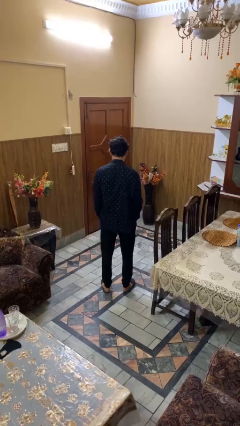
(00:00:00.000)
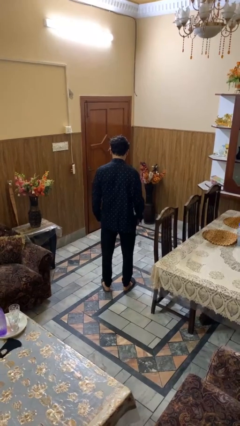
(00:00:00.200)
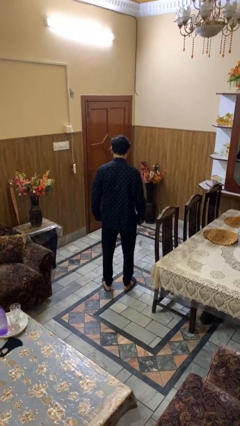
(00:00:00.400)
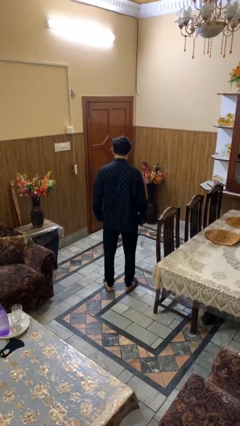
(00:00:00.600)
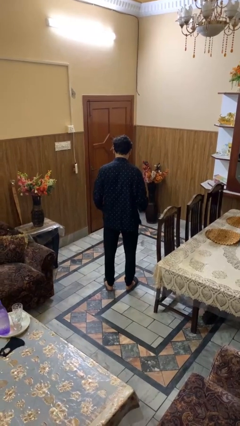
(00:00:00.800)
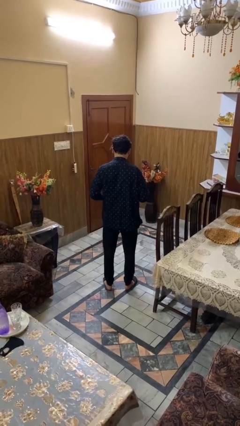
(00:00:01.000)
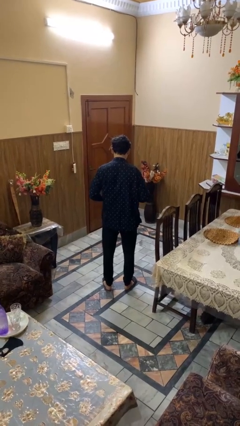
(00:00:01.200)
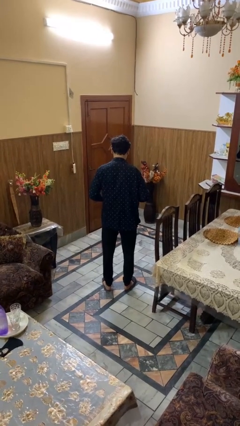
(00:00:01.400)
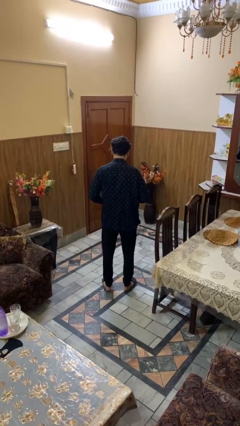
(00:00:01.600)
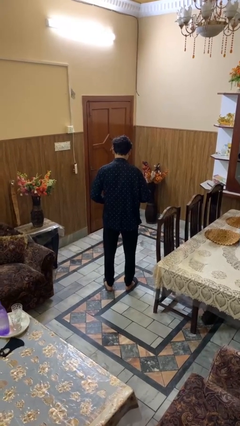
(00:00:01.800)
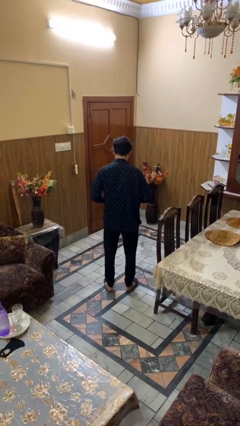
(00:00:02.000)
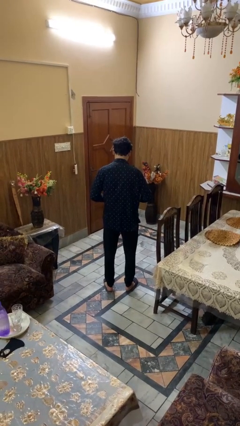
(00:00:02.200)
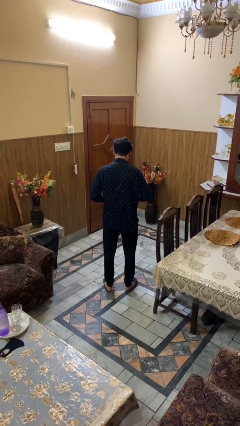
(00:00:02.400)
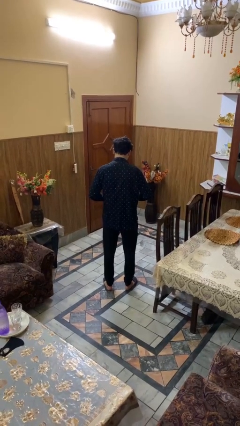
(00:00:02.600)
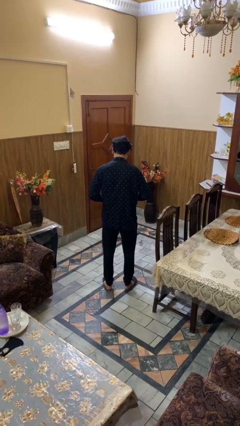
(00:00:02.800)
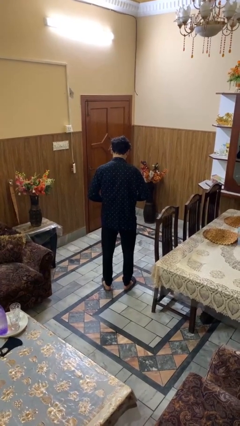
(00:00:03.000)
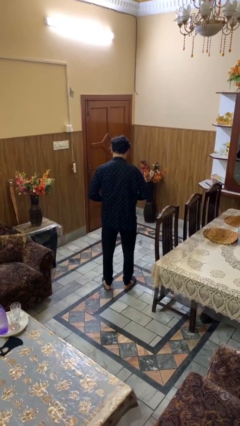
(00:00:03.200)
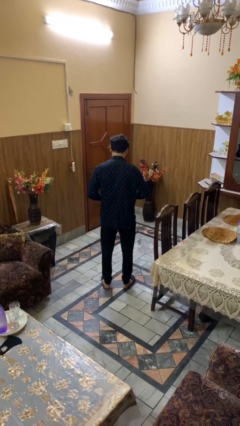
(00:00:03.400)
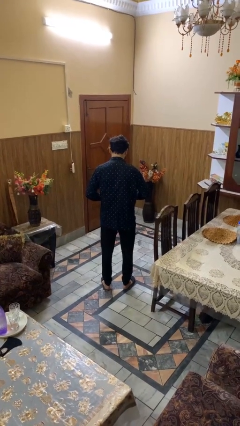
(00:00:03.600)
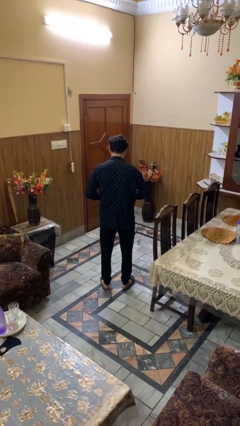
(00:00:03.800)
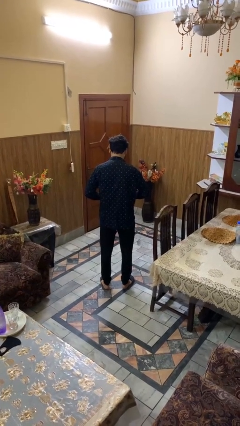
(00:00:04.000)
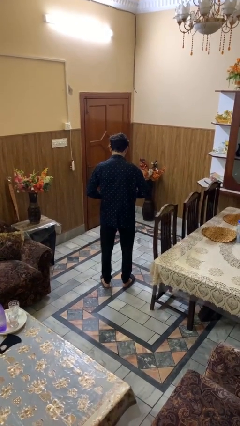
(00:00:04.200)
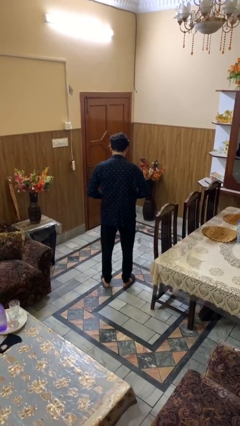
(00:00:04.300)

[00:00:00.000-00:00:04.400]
person buttons shirt

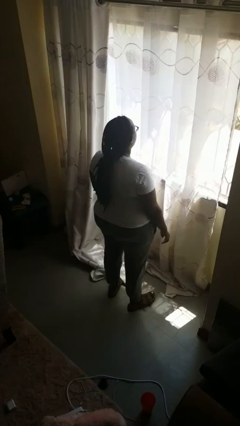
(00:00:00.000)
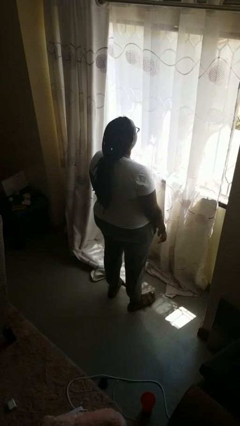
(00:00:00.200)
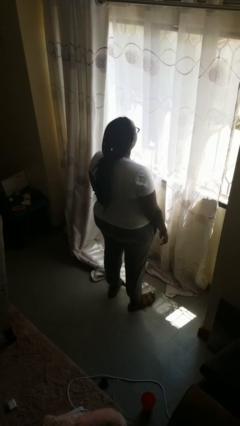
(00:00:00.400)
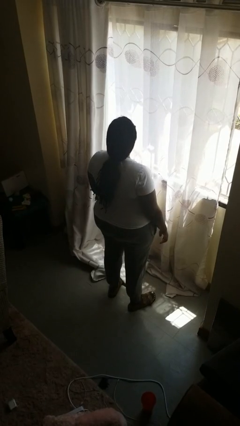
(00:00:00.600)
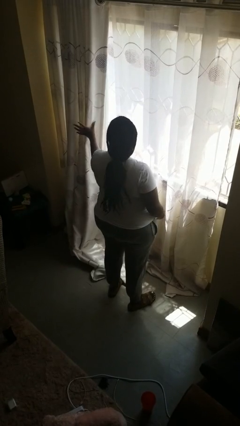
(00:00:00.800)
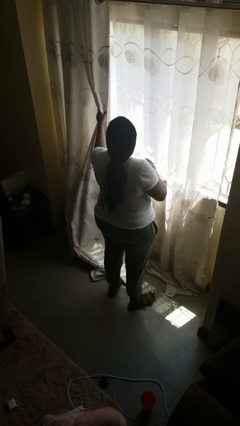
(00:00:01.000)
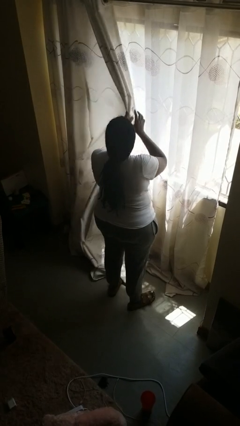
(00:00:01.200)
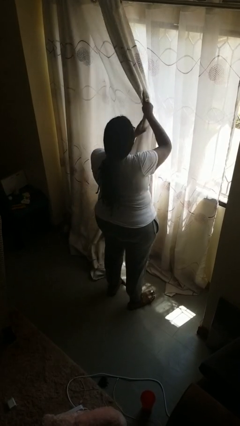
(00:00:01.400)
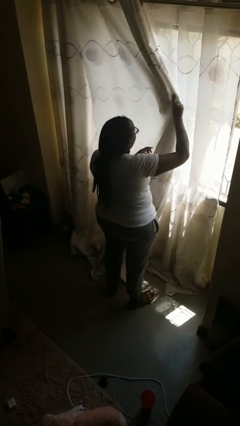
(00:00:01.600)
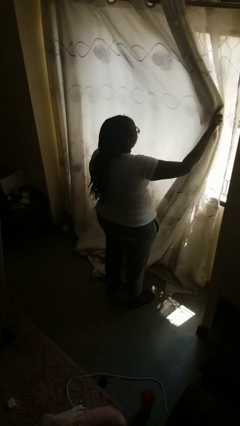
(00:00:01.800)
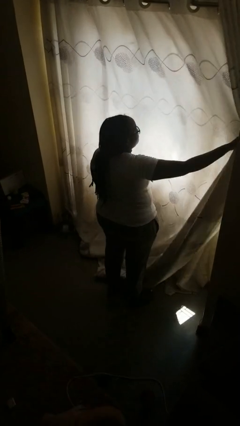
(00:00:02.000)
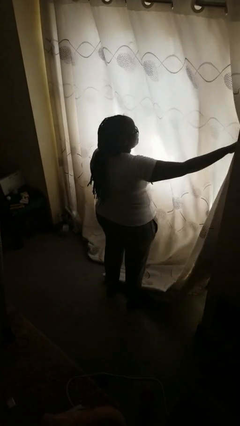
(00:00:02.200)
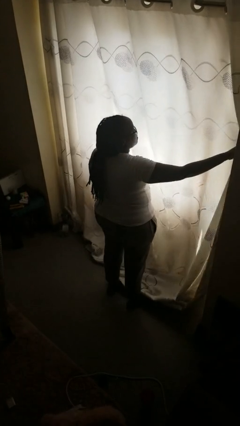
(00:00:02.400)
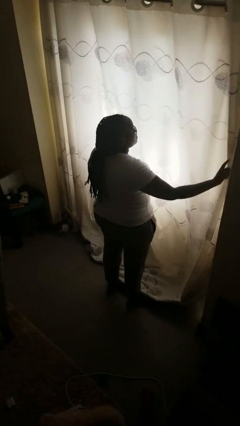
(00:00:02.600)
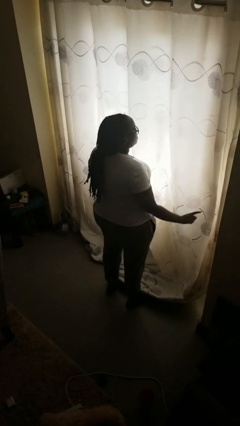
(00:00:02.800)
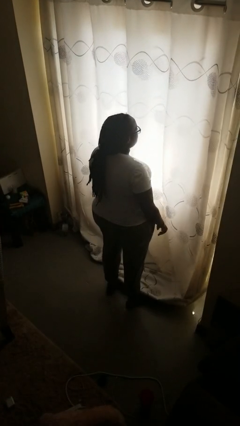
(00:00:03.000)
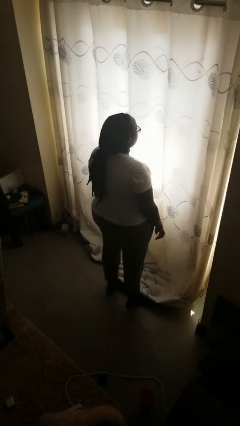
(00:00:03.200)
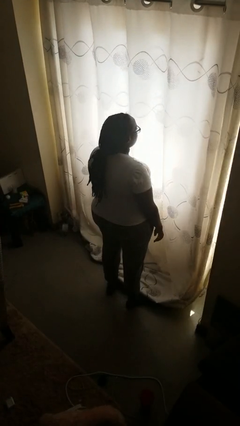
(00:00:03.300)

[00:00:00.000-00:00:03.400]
person closes curtains

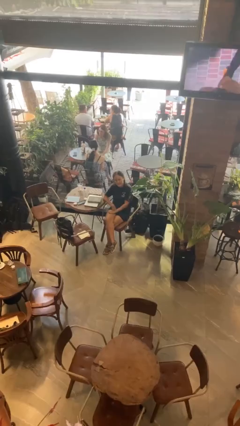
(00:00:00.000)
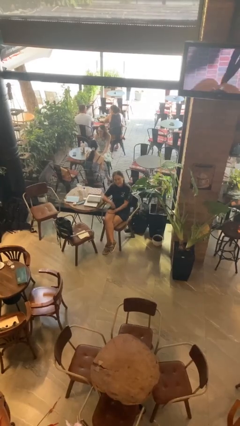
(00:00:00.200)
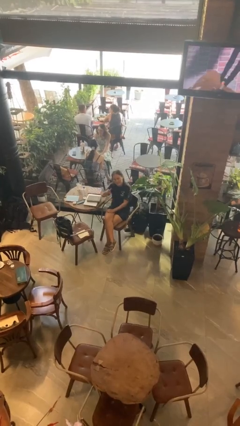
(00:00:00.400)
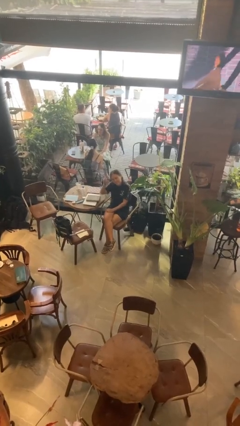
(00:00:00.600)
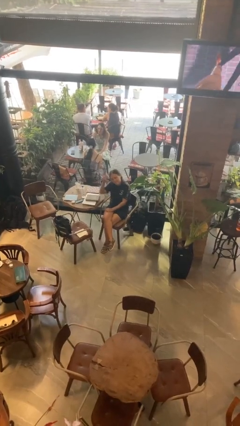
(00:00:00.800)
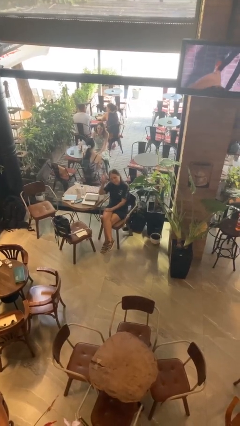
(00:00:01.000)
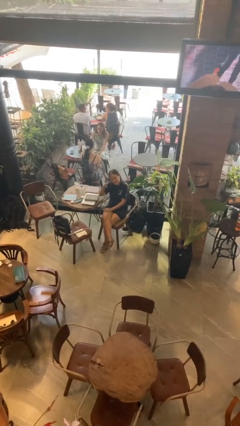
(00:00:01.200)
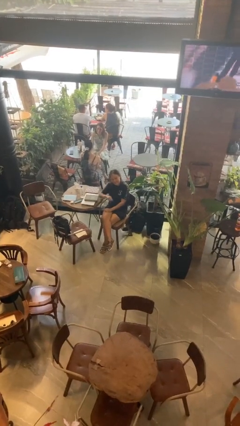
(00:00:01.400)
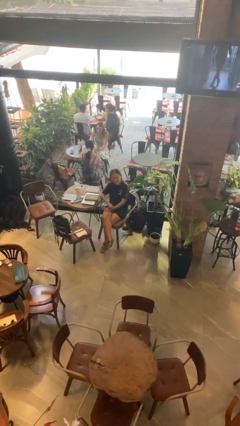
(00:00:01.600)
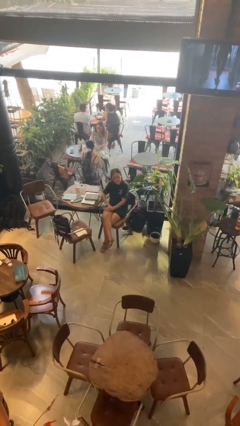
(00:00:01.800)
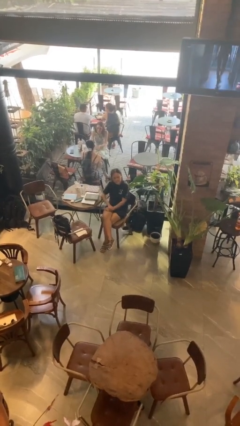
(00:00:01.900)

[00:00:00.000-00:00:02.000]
person gestures peace

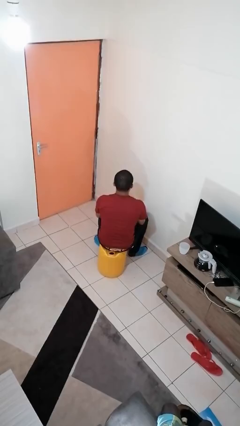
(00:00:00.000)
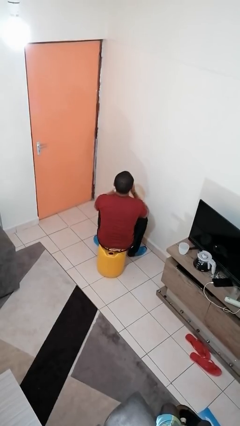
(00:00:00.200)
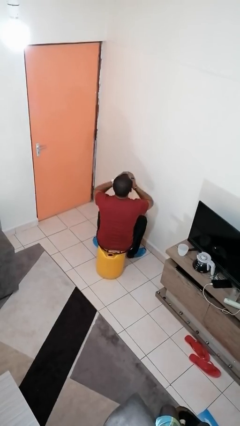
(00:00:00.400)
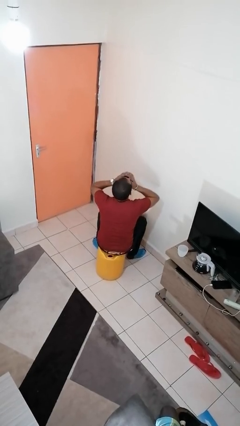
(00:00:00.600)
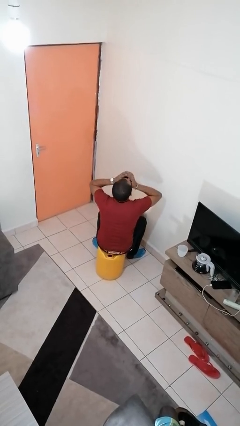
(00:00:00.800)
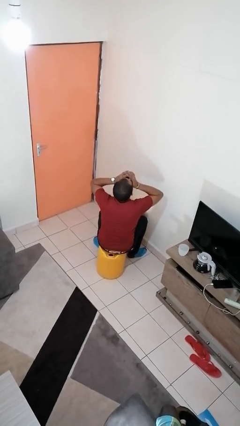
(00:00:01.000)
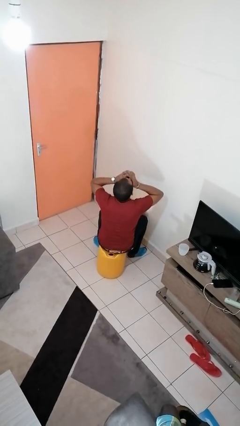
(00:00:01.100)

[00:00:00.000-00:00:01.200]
person drinks from mug

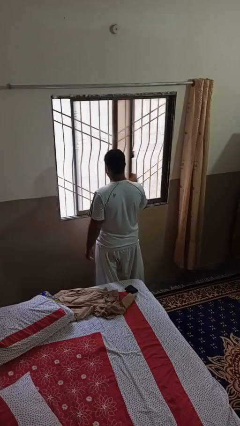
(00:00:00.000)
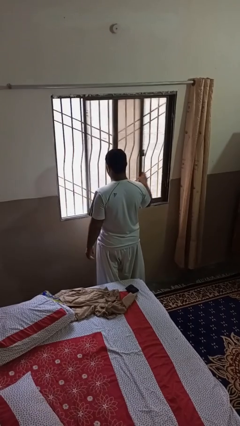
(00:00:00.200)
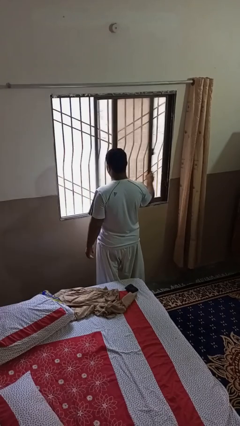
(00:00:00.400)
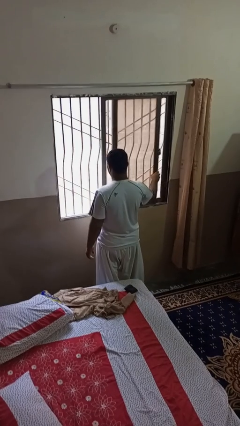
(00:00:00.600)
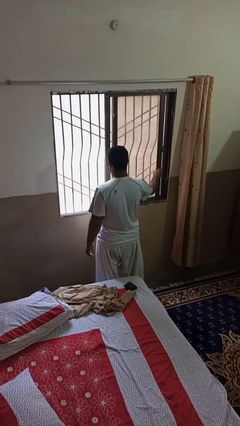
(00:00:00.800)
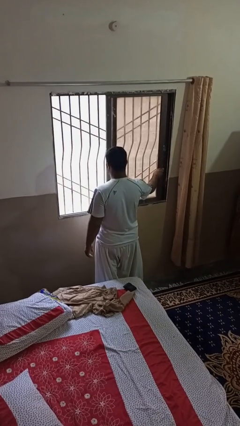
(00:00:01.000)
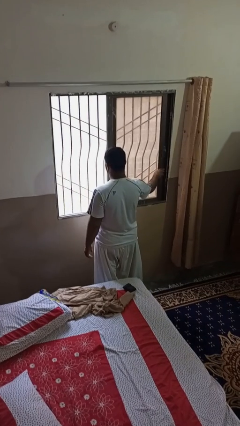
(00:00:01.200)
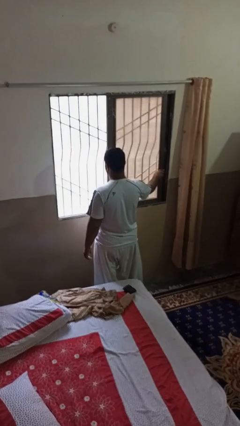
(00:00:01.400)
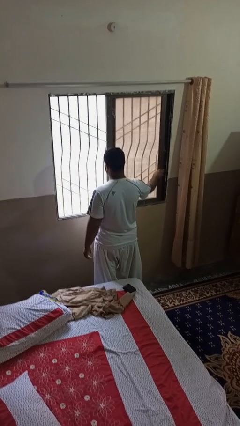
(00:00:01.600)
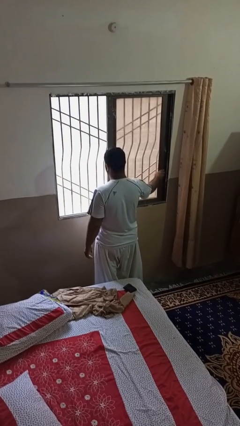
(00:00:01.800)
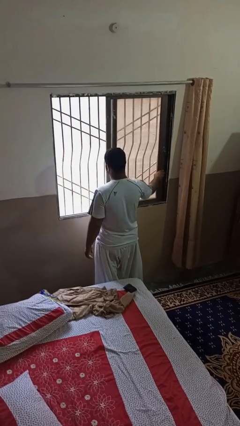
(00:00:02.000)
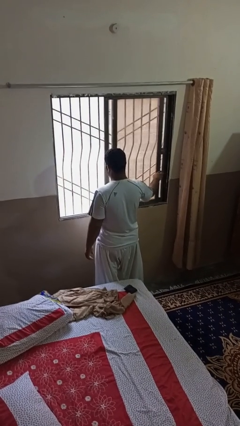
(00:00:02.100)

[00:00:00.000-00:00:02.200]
person opens home window

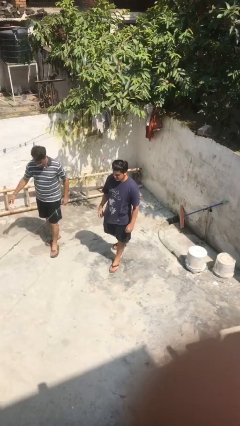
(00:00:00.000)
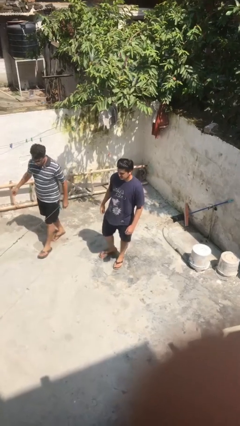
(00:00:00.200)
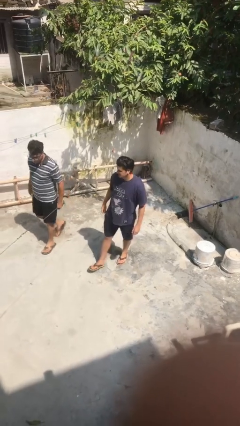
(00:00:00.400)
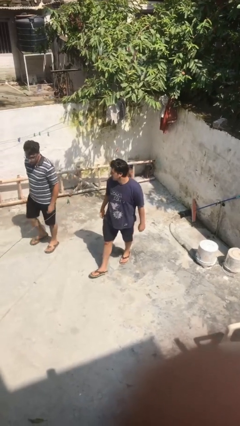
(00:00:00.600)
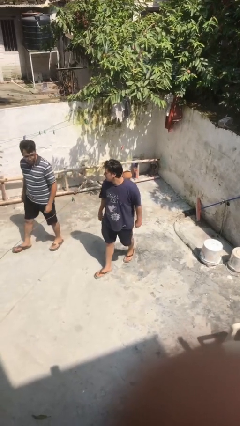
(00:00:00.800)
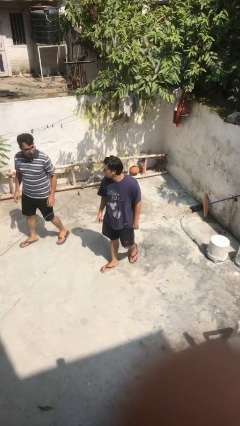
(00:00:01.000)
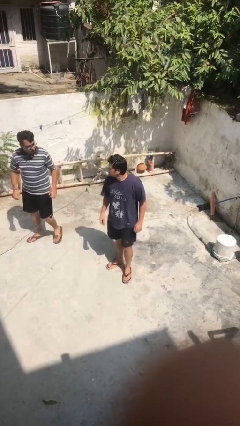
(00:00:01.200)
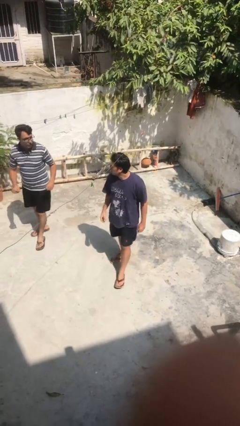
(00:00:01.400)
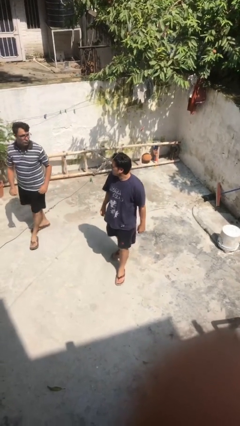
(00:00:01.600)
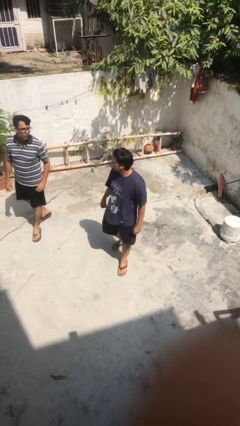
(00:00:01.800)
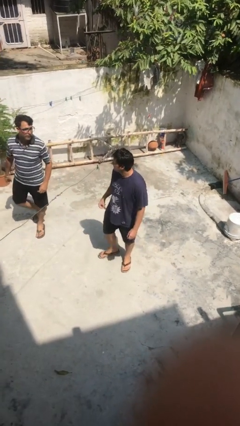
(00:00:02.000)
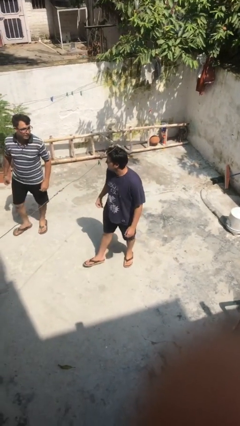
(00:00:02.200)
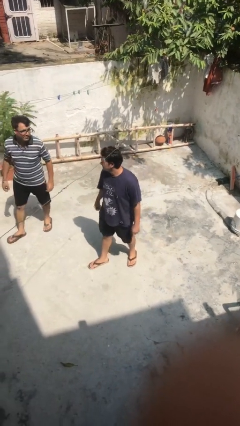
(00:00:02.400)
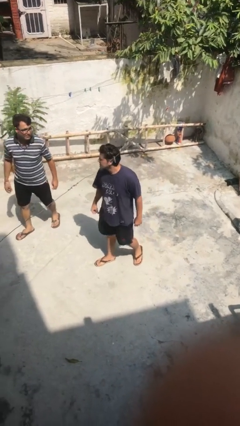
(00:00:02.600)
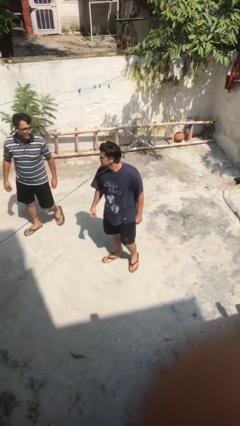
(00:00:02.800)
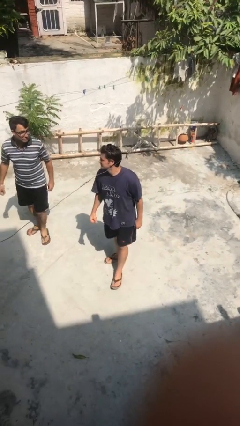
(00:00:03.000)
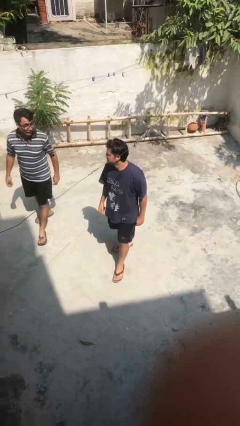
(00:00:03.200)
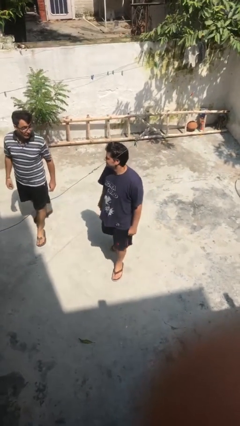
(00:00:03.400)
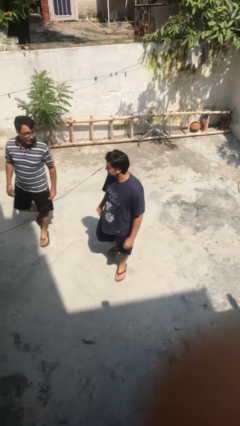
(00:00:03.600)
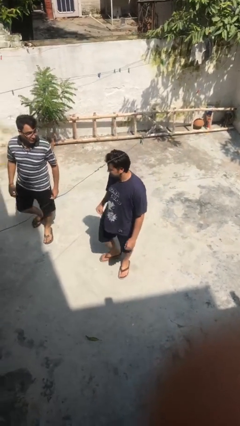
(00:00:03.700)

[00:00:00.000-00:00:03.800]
person talks to person
